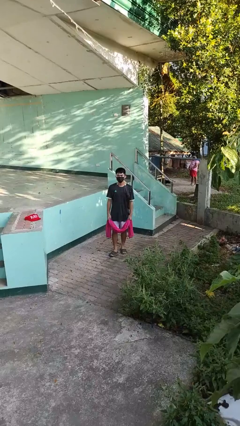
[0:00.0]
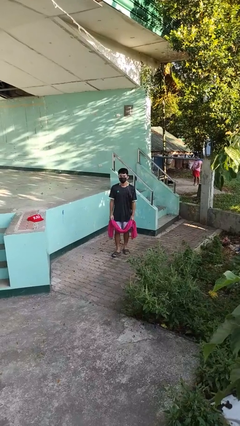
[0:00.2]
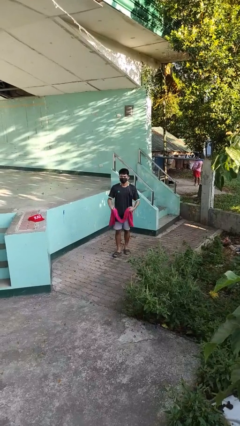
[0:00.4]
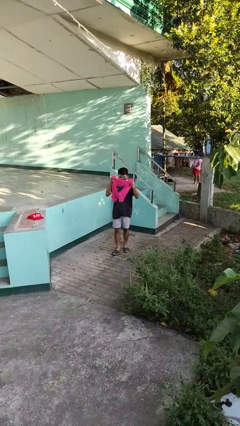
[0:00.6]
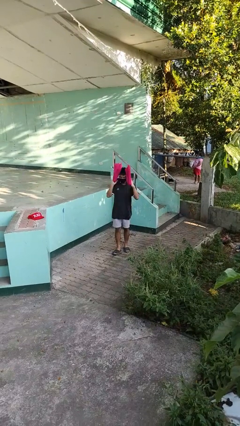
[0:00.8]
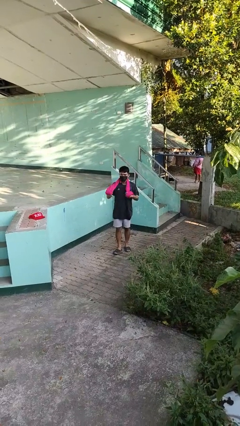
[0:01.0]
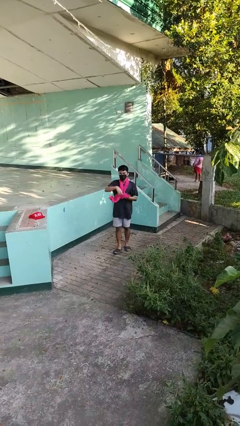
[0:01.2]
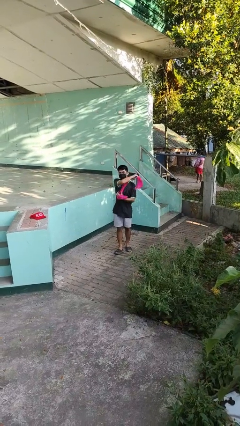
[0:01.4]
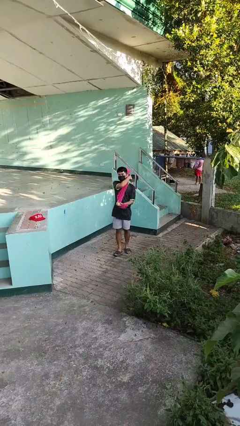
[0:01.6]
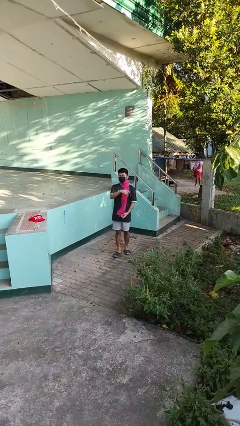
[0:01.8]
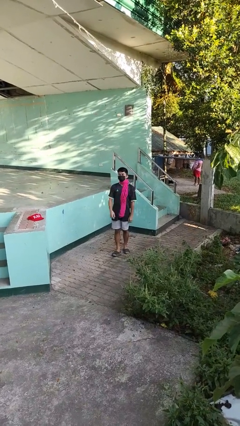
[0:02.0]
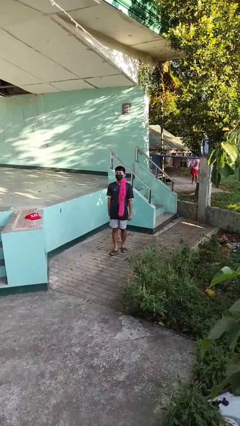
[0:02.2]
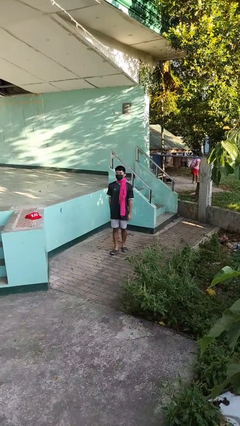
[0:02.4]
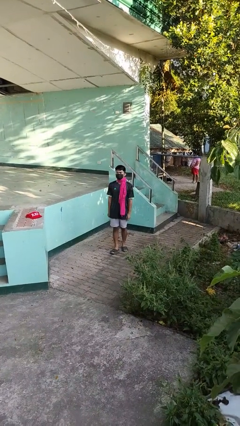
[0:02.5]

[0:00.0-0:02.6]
person puts on scarf

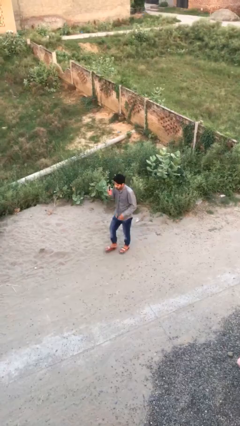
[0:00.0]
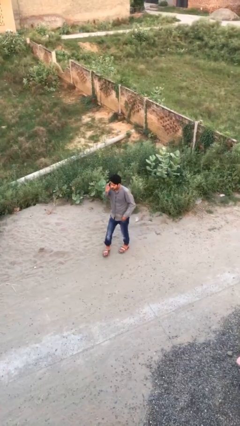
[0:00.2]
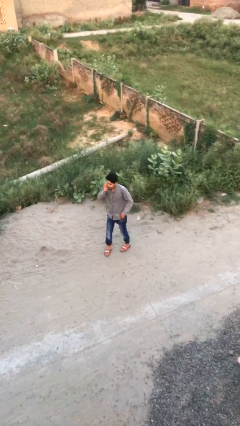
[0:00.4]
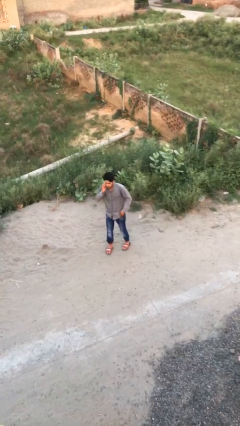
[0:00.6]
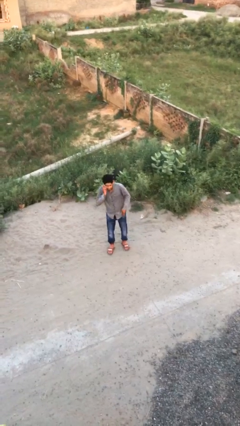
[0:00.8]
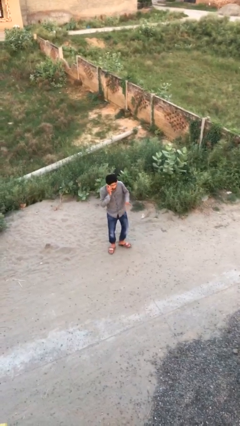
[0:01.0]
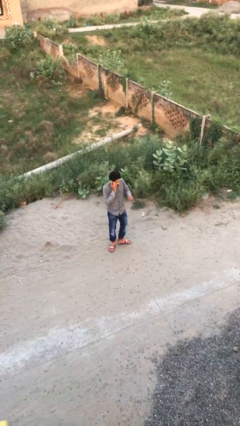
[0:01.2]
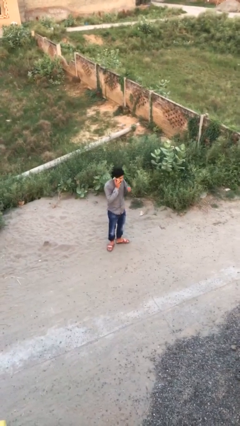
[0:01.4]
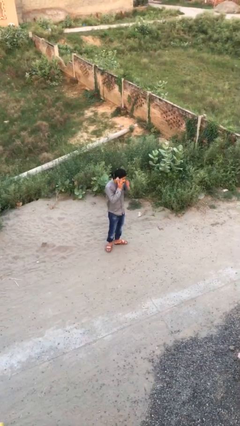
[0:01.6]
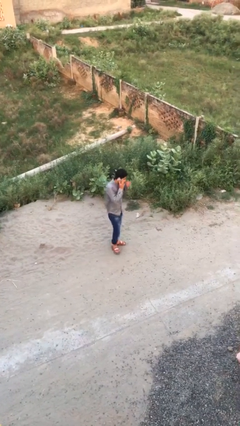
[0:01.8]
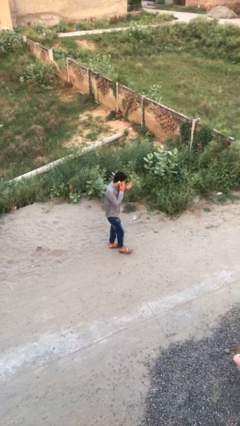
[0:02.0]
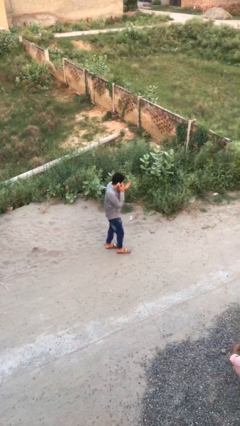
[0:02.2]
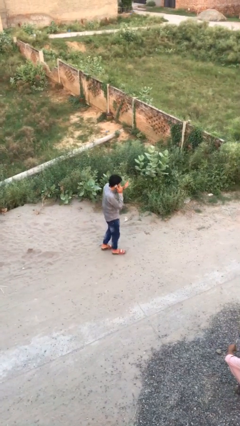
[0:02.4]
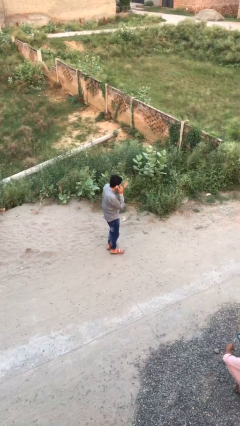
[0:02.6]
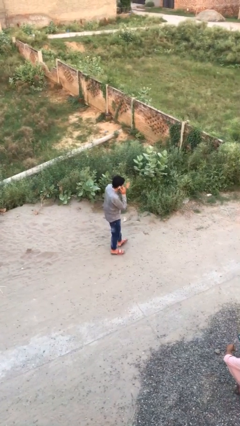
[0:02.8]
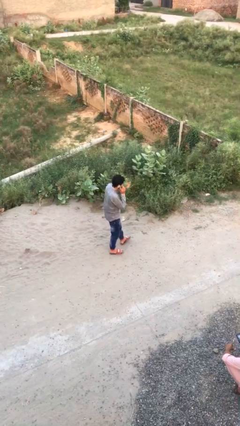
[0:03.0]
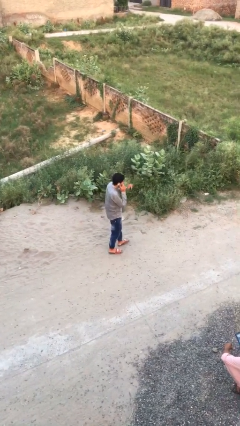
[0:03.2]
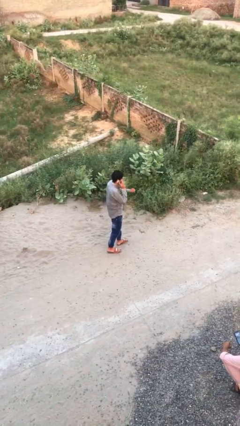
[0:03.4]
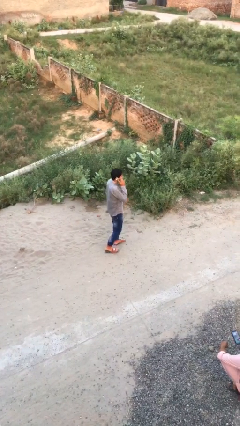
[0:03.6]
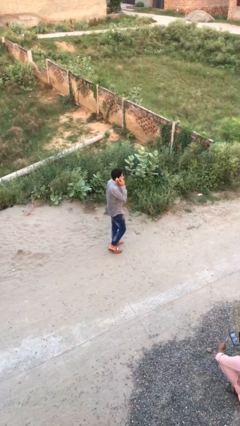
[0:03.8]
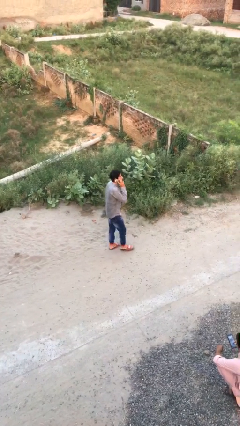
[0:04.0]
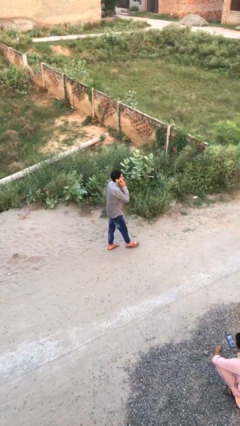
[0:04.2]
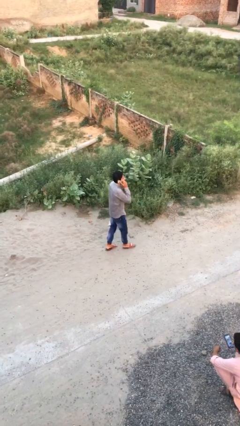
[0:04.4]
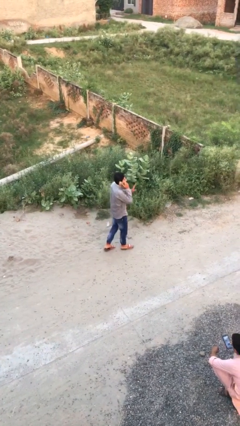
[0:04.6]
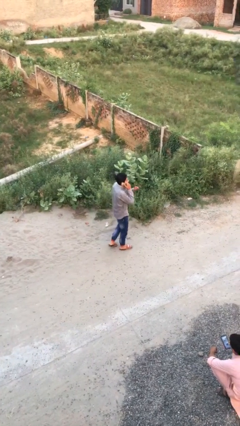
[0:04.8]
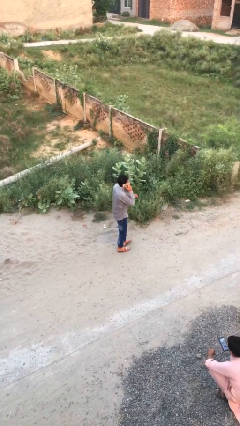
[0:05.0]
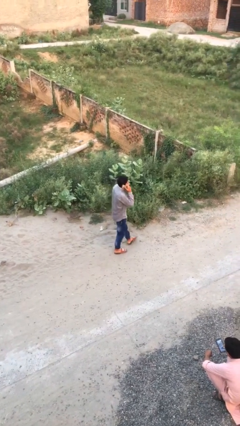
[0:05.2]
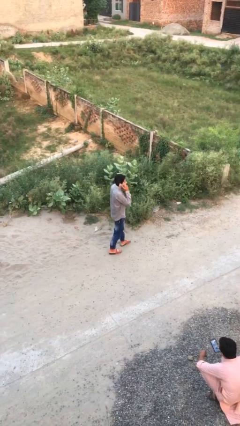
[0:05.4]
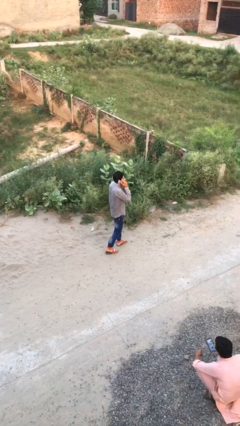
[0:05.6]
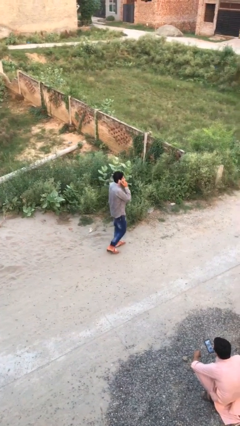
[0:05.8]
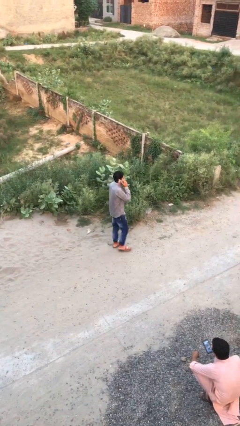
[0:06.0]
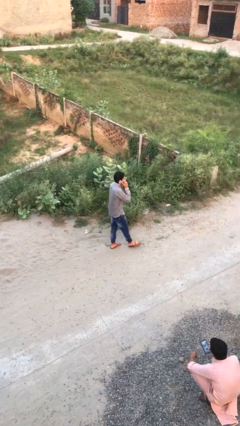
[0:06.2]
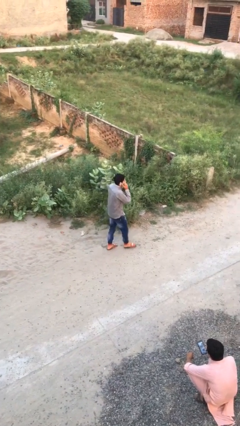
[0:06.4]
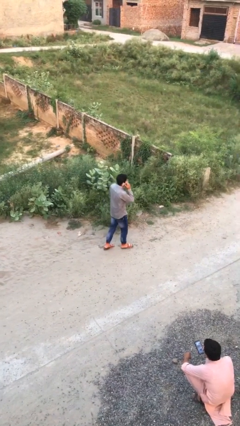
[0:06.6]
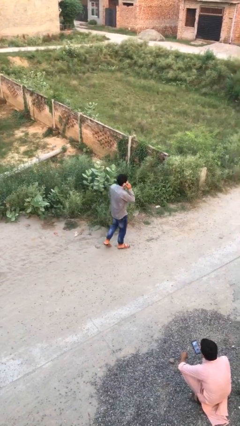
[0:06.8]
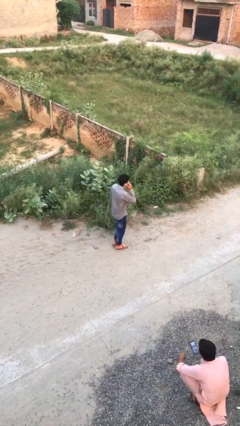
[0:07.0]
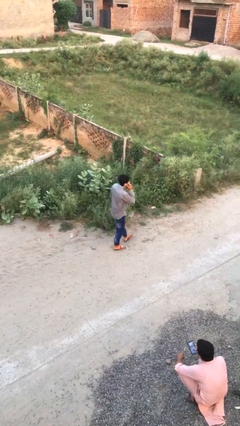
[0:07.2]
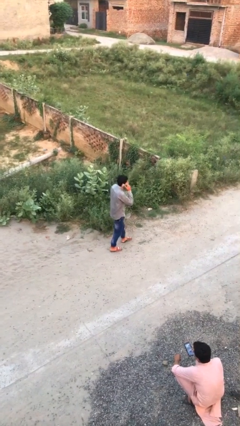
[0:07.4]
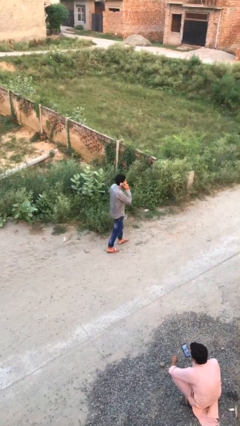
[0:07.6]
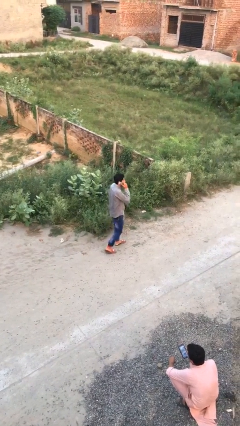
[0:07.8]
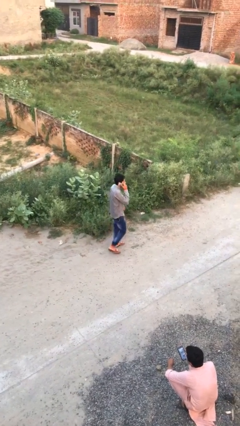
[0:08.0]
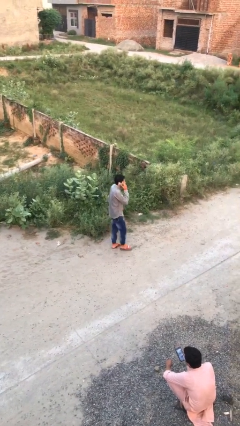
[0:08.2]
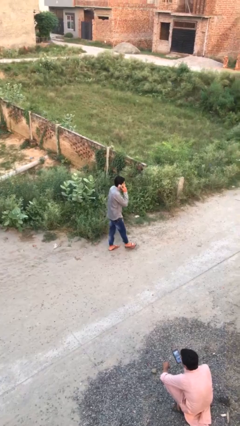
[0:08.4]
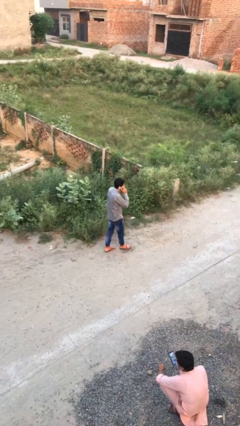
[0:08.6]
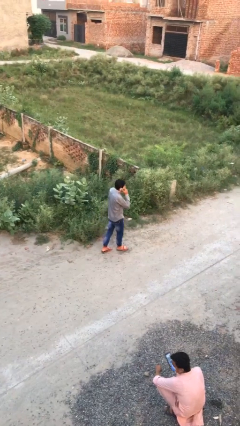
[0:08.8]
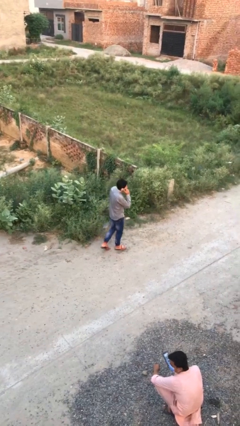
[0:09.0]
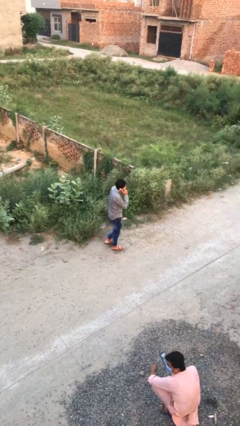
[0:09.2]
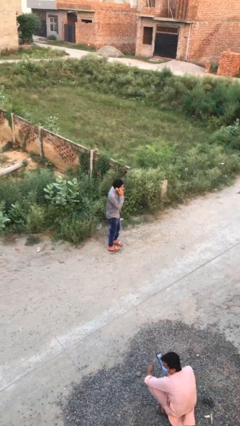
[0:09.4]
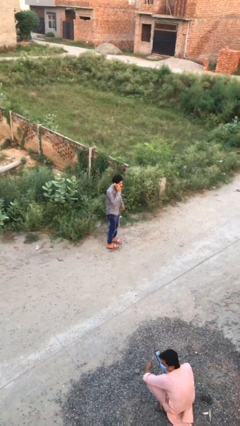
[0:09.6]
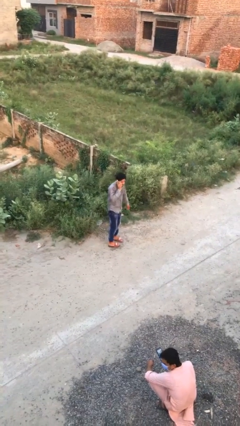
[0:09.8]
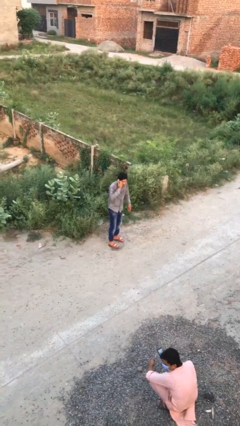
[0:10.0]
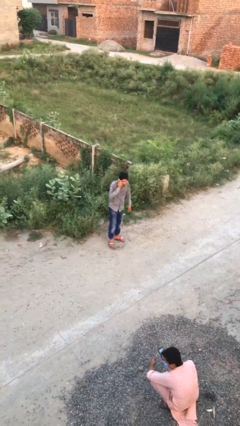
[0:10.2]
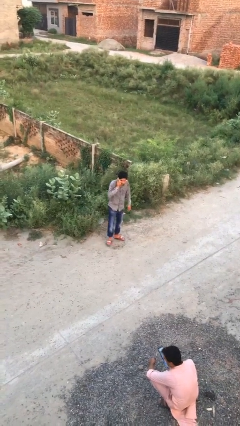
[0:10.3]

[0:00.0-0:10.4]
person talks on phone

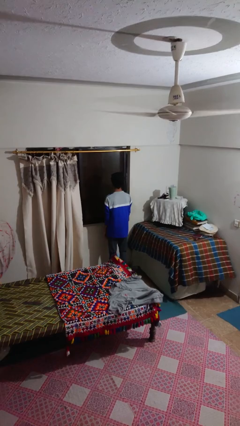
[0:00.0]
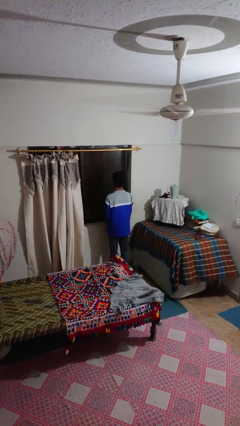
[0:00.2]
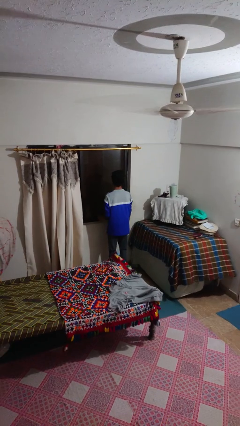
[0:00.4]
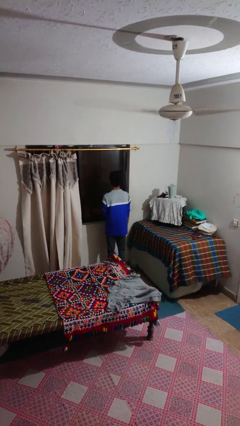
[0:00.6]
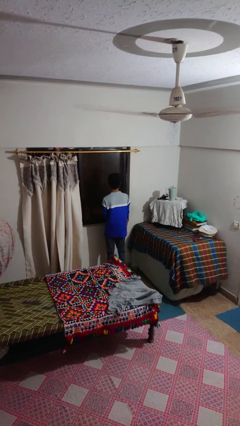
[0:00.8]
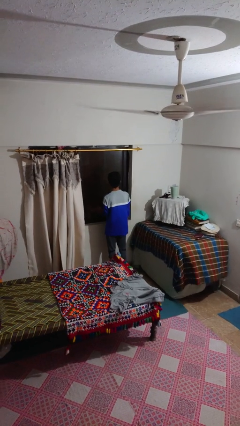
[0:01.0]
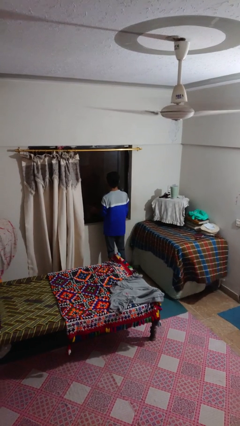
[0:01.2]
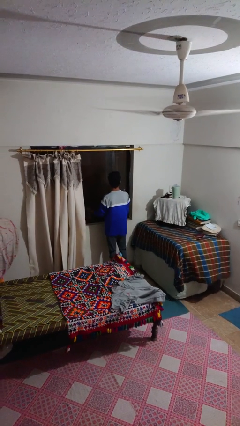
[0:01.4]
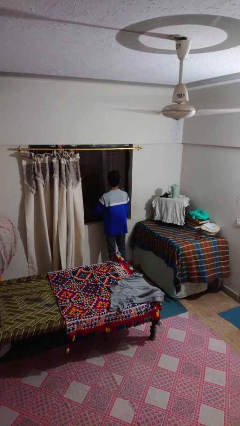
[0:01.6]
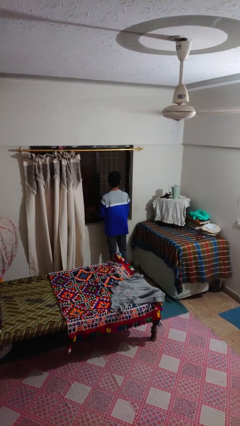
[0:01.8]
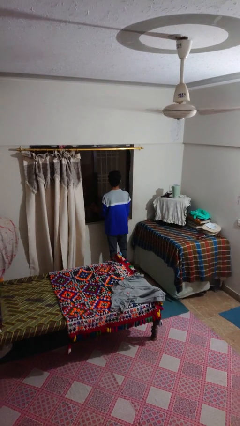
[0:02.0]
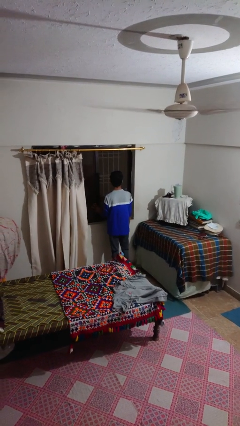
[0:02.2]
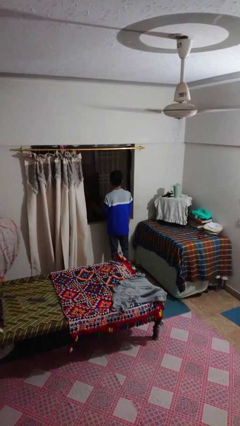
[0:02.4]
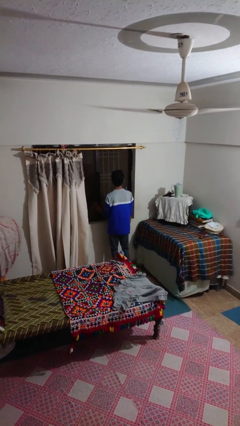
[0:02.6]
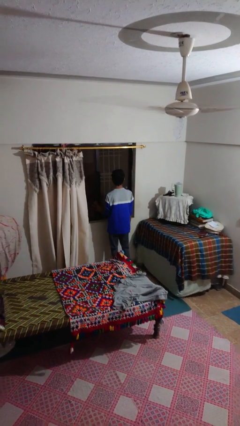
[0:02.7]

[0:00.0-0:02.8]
person opens home window

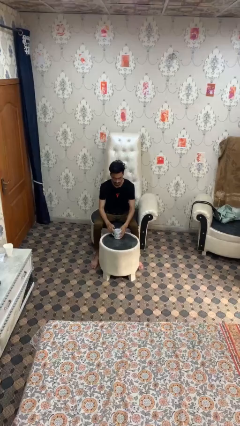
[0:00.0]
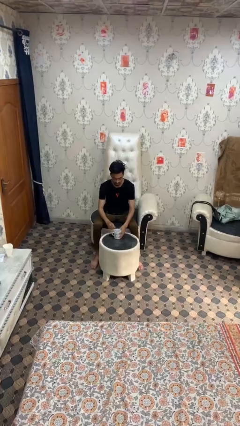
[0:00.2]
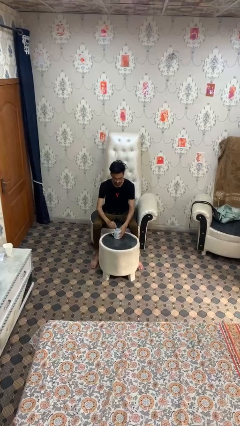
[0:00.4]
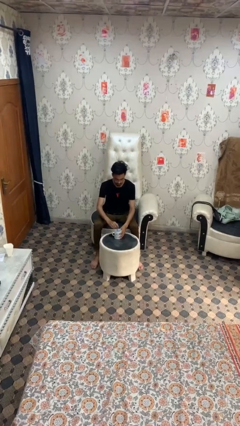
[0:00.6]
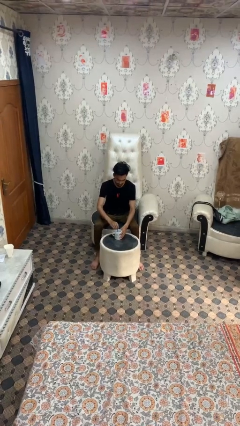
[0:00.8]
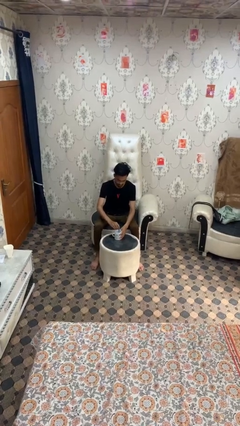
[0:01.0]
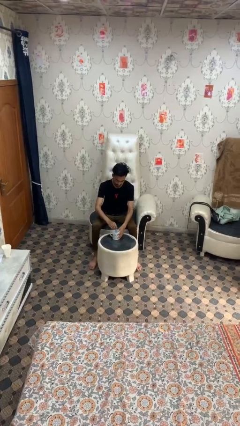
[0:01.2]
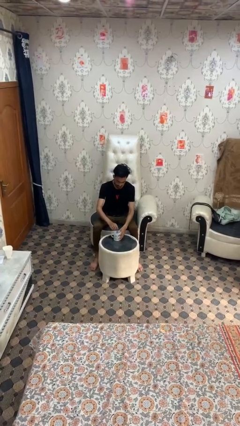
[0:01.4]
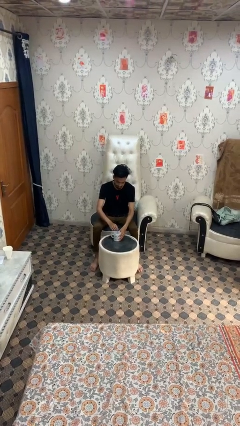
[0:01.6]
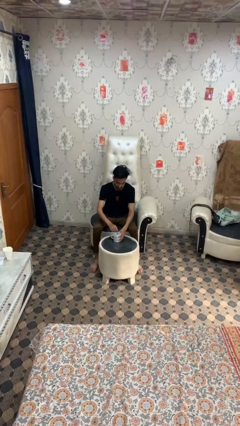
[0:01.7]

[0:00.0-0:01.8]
person stirs mug

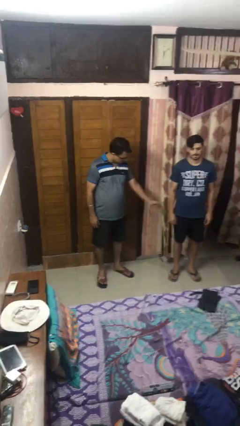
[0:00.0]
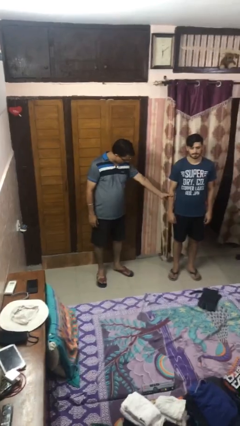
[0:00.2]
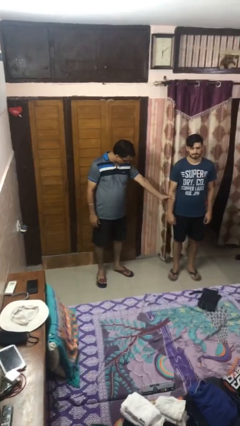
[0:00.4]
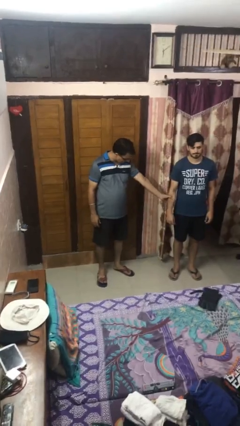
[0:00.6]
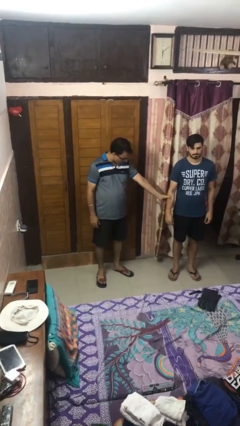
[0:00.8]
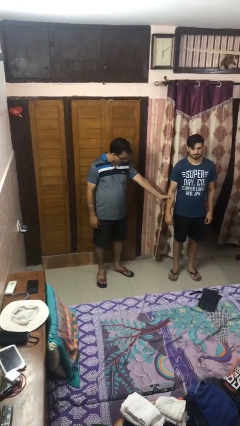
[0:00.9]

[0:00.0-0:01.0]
person grabs person by forearm
